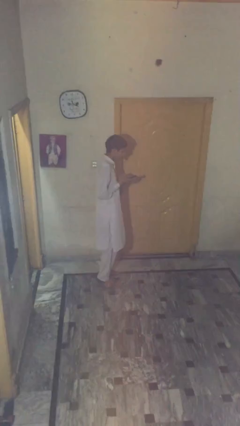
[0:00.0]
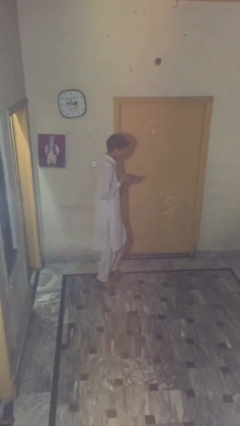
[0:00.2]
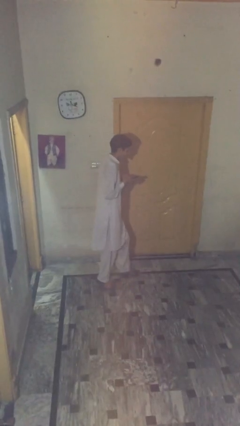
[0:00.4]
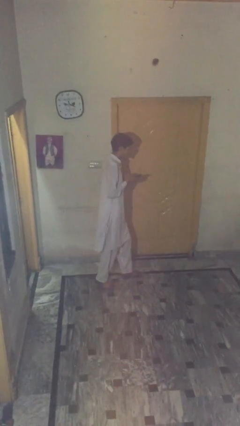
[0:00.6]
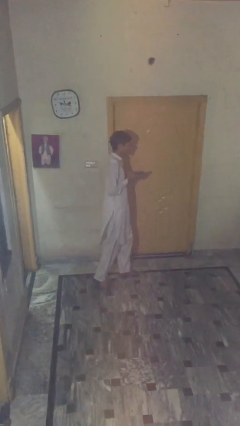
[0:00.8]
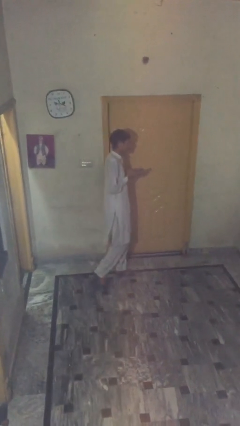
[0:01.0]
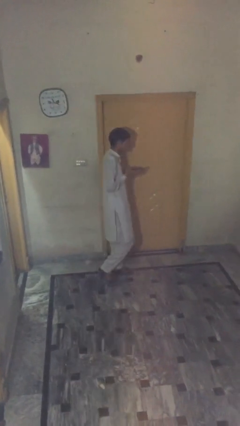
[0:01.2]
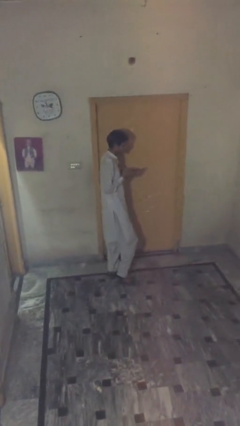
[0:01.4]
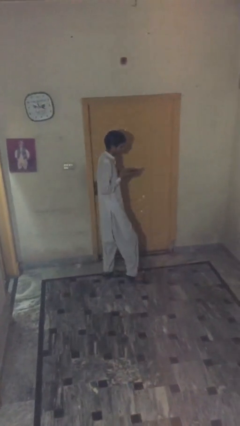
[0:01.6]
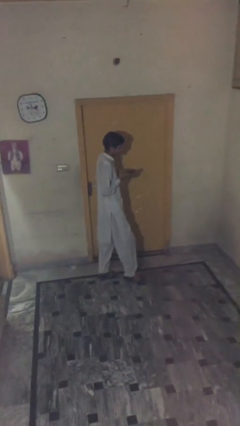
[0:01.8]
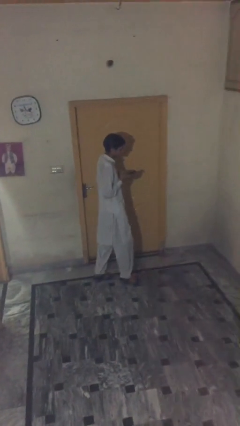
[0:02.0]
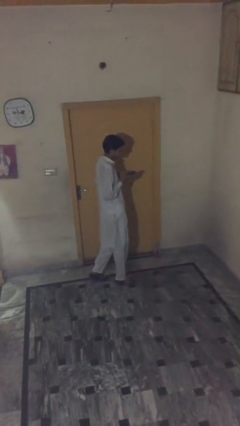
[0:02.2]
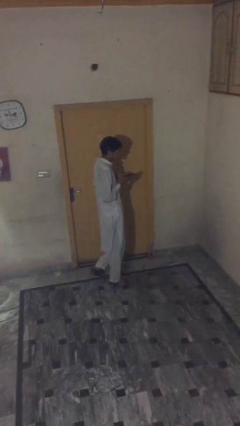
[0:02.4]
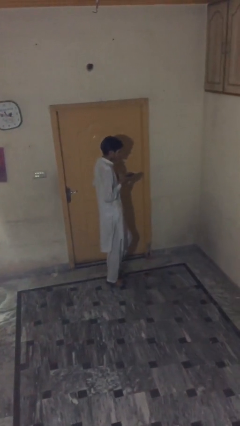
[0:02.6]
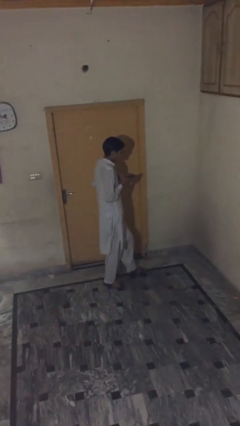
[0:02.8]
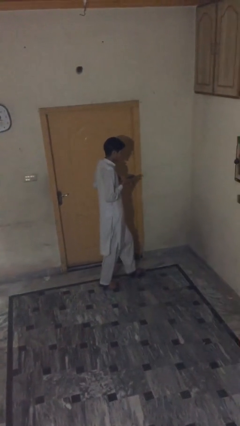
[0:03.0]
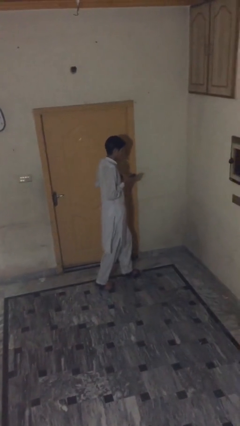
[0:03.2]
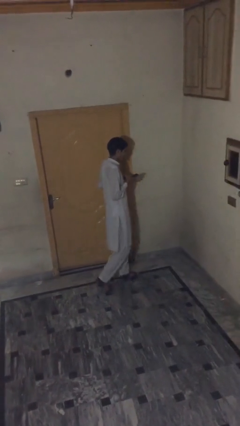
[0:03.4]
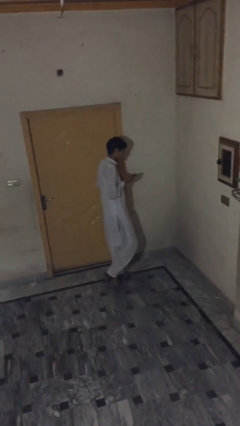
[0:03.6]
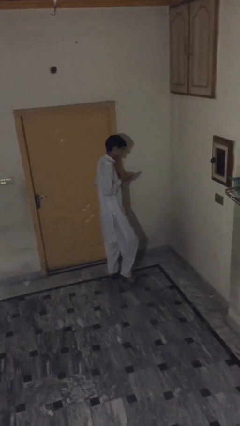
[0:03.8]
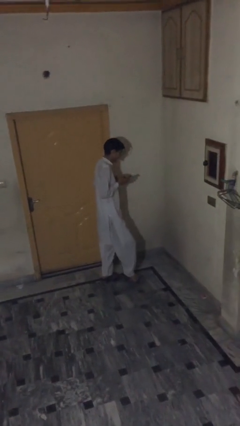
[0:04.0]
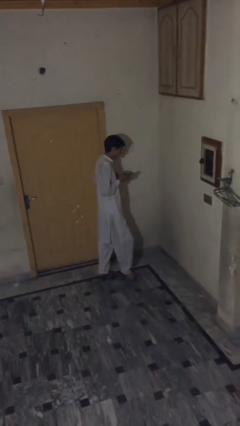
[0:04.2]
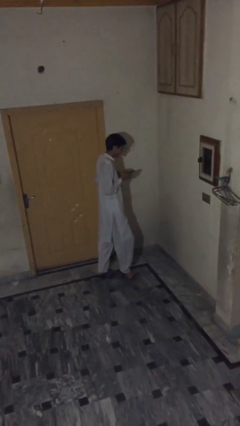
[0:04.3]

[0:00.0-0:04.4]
person texts on phone

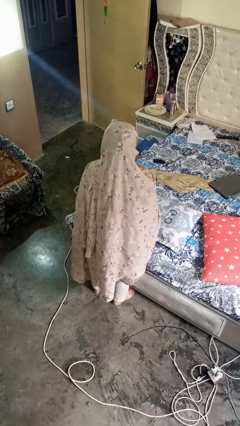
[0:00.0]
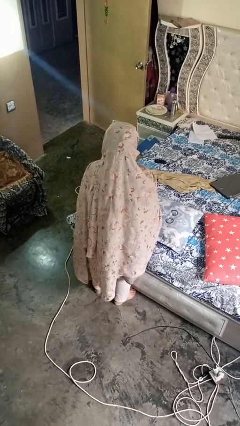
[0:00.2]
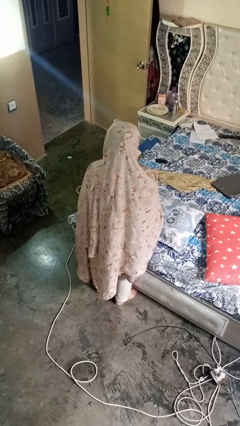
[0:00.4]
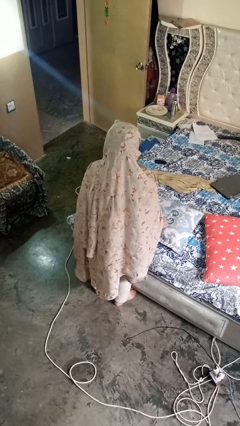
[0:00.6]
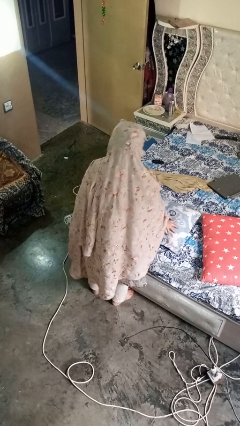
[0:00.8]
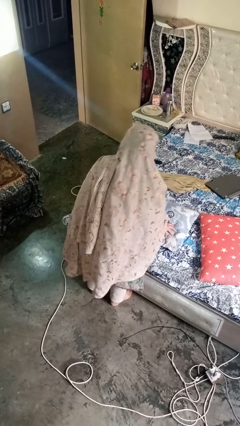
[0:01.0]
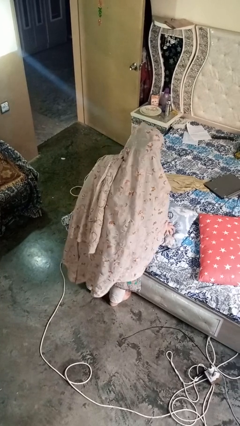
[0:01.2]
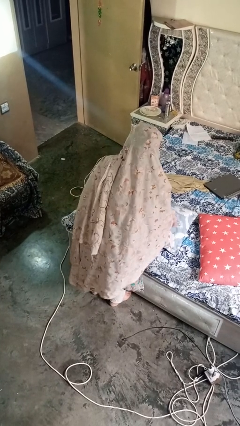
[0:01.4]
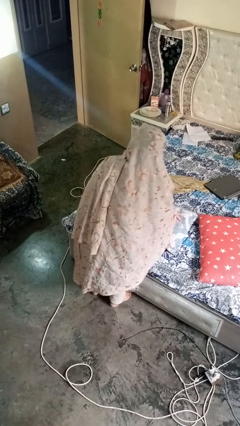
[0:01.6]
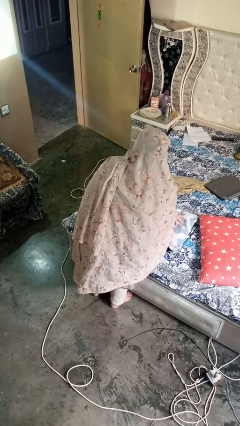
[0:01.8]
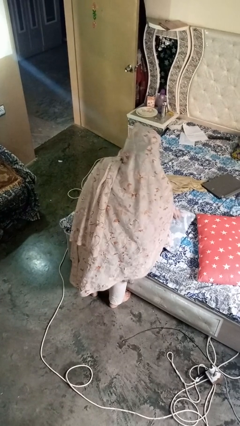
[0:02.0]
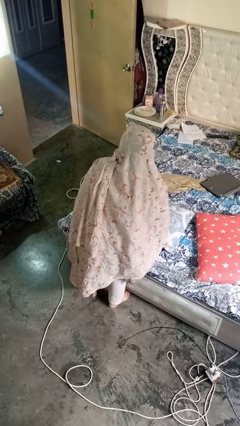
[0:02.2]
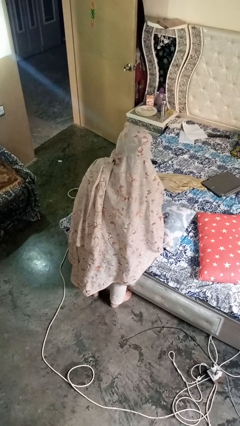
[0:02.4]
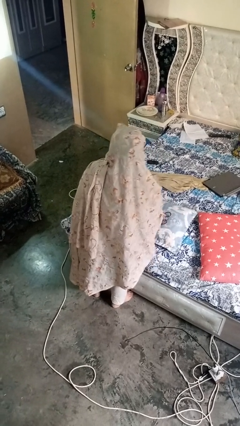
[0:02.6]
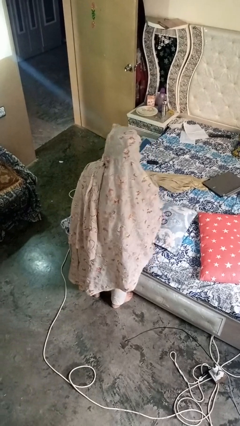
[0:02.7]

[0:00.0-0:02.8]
person taps object with finger

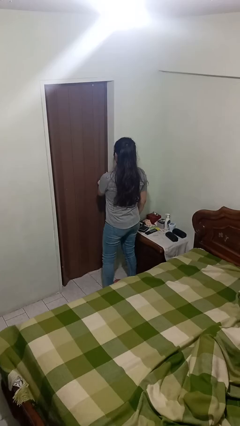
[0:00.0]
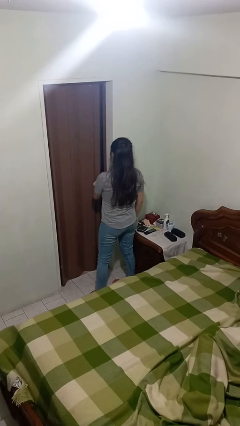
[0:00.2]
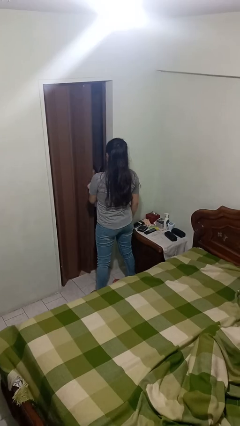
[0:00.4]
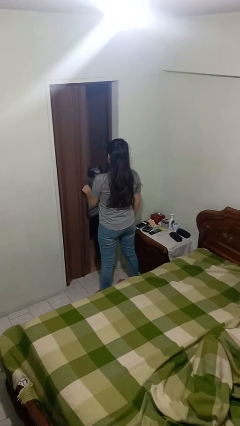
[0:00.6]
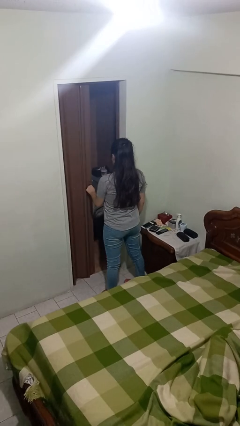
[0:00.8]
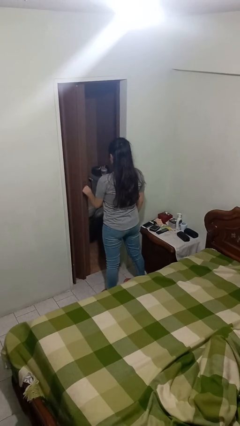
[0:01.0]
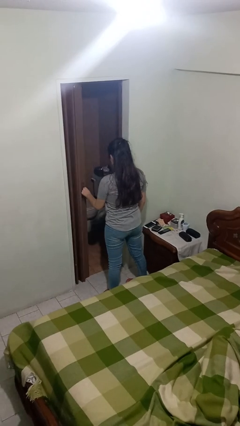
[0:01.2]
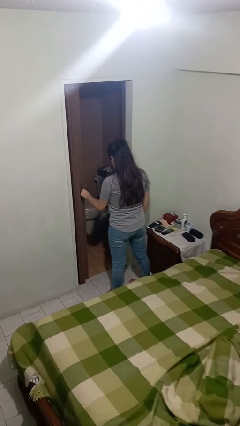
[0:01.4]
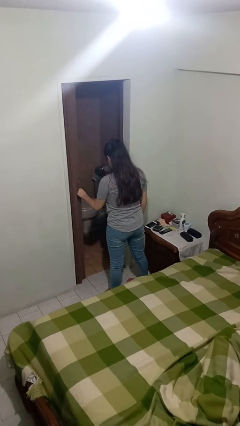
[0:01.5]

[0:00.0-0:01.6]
person opens sliding door

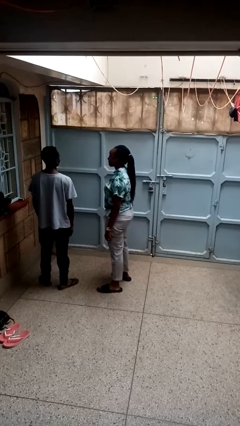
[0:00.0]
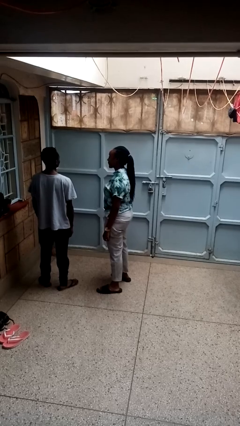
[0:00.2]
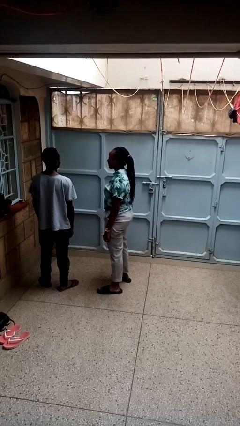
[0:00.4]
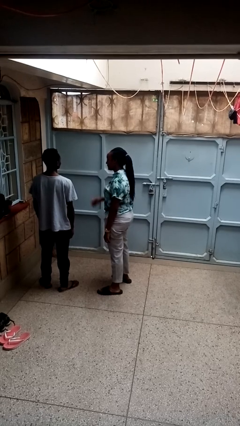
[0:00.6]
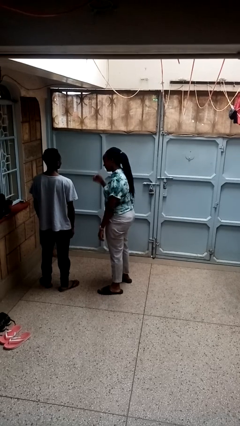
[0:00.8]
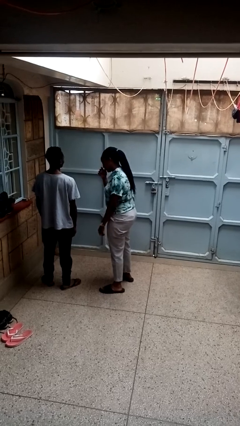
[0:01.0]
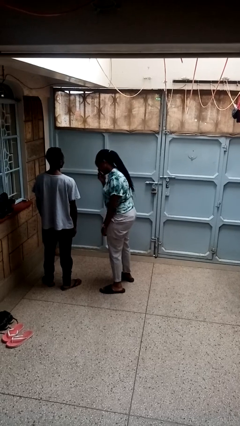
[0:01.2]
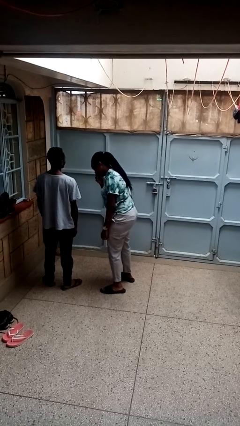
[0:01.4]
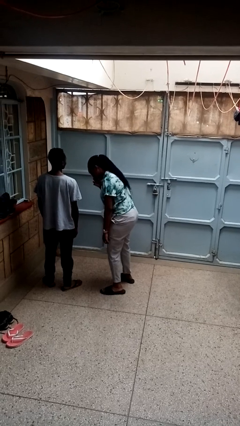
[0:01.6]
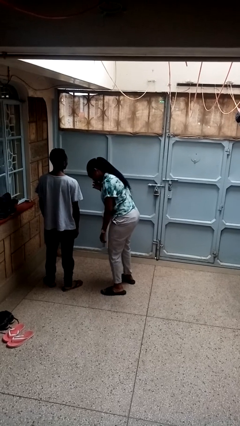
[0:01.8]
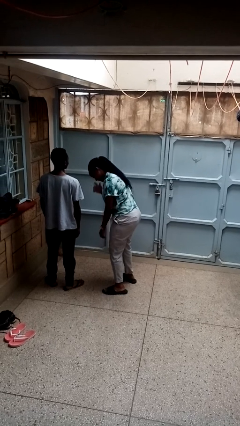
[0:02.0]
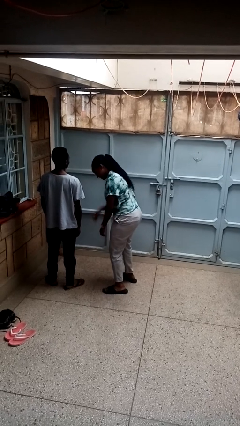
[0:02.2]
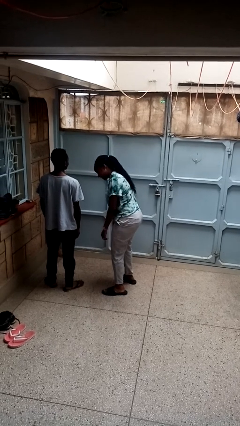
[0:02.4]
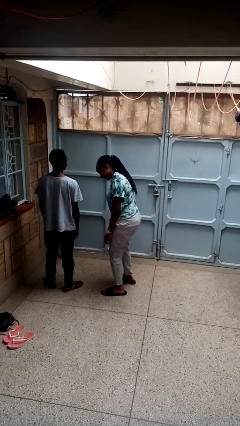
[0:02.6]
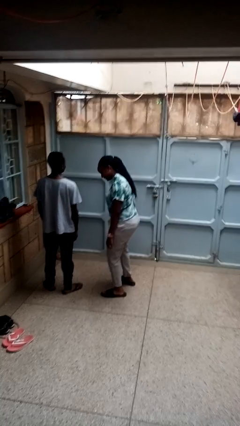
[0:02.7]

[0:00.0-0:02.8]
person laughs with person

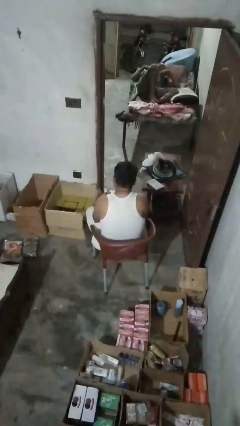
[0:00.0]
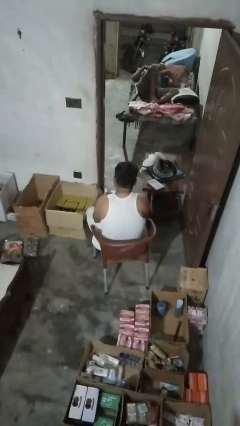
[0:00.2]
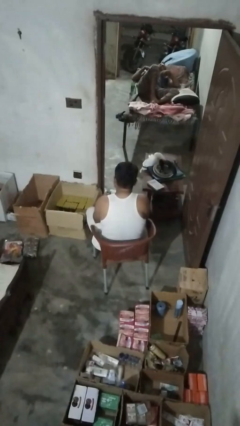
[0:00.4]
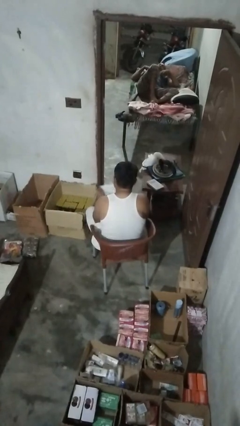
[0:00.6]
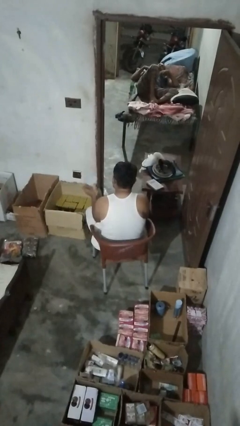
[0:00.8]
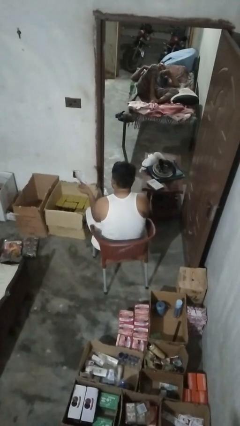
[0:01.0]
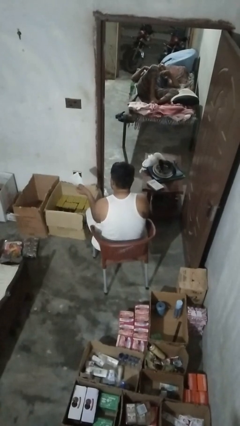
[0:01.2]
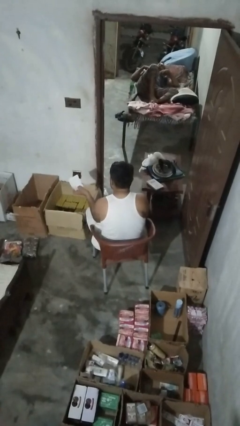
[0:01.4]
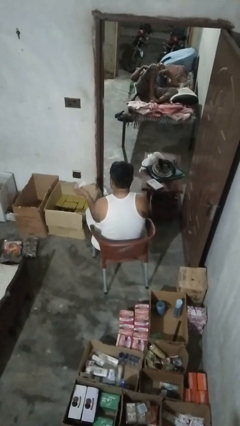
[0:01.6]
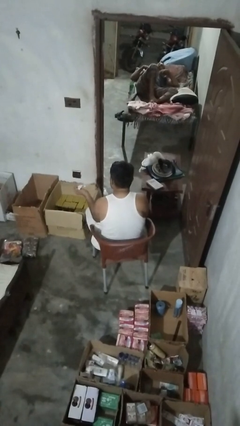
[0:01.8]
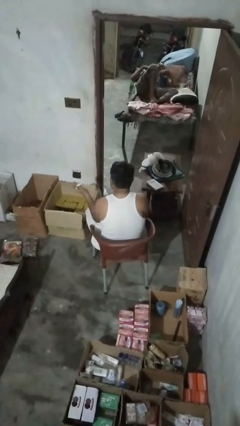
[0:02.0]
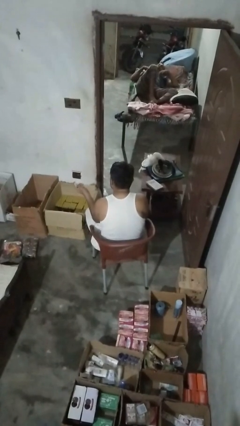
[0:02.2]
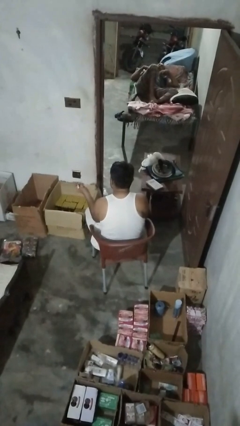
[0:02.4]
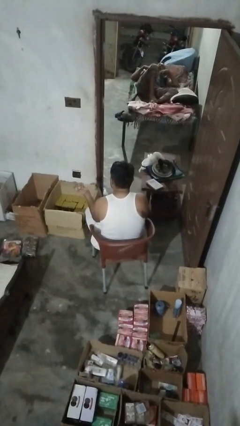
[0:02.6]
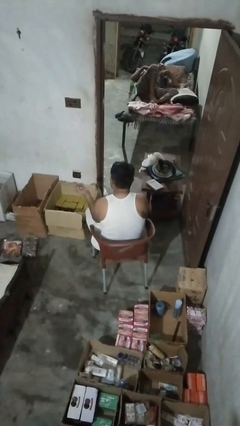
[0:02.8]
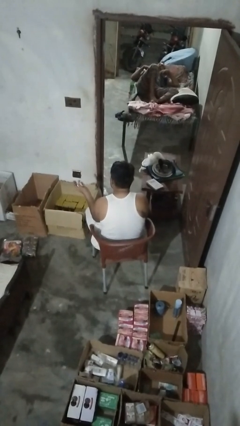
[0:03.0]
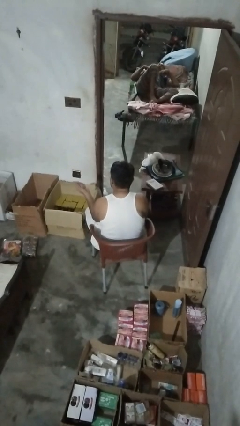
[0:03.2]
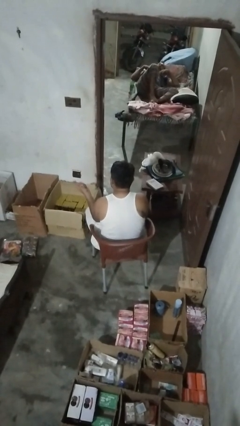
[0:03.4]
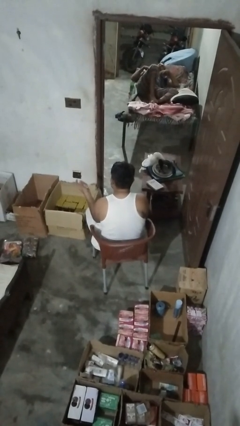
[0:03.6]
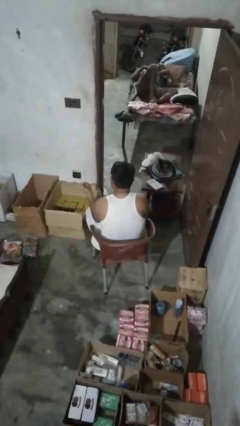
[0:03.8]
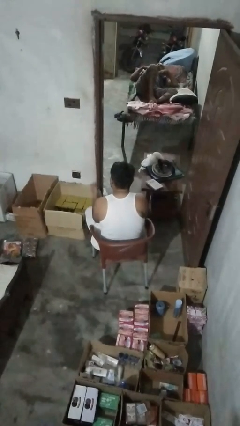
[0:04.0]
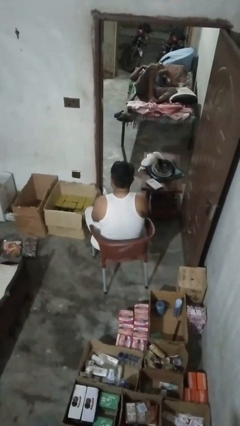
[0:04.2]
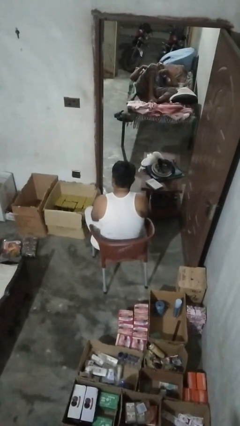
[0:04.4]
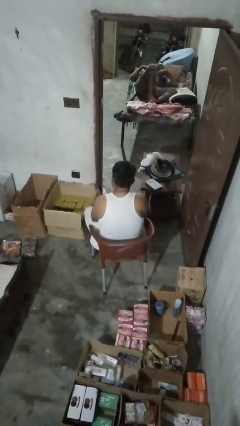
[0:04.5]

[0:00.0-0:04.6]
person crumples paper

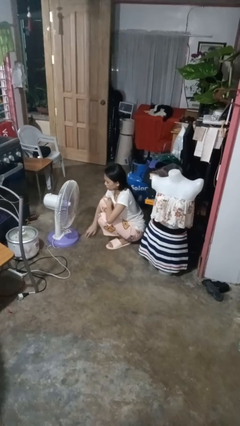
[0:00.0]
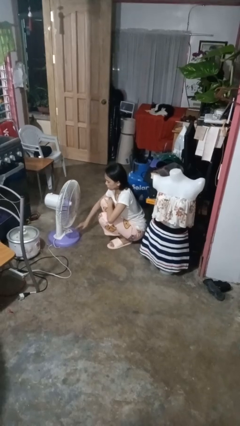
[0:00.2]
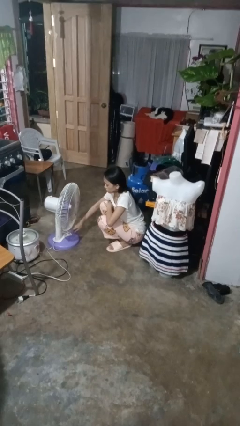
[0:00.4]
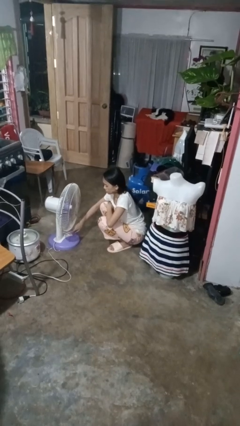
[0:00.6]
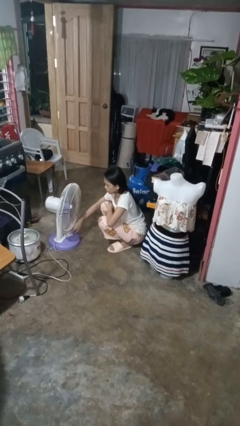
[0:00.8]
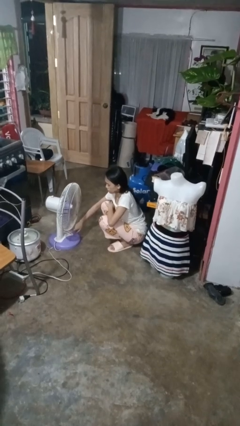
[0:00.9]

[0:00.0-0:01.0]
person turns off fan
